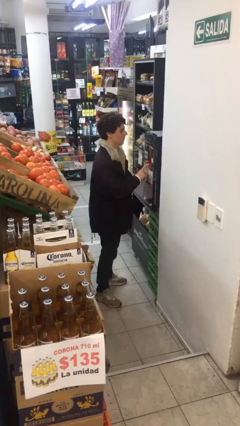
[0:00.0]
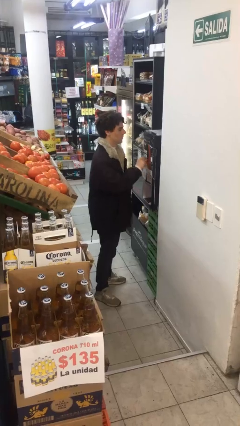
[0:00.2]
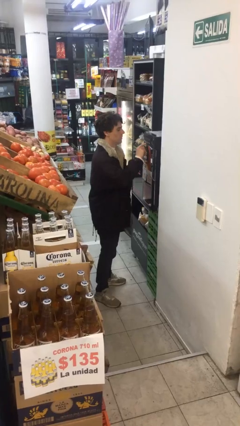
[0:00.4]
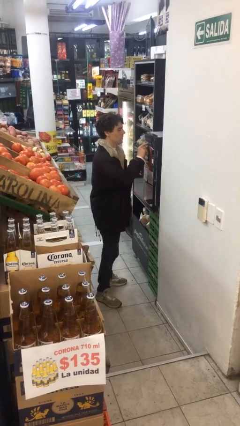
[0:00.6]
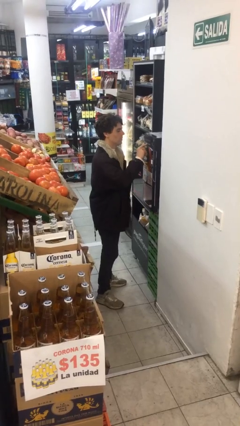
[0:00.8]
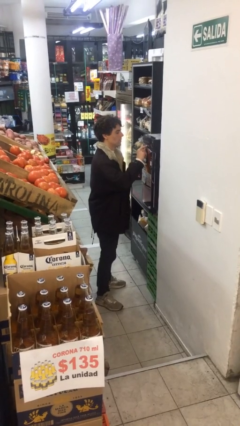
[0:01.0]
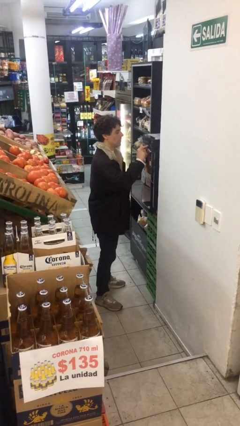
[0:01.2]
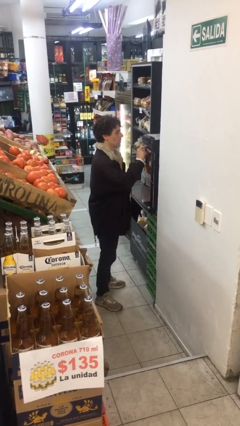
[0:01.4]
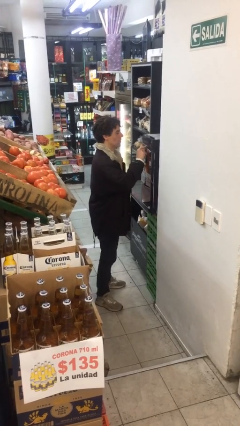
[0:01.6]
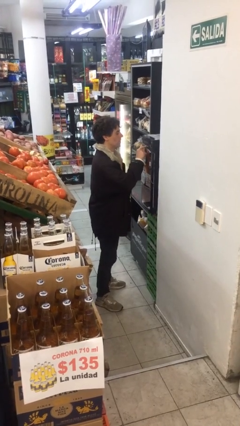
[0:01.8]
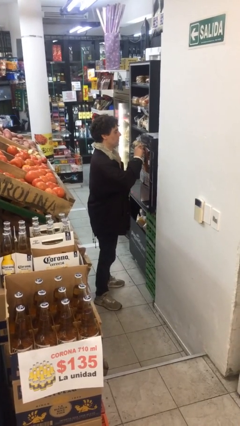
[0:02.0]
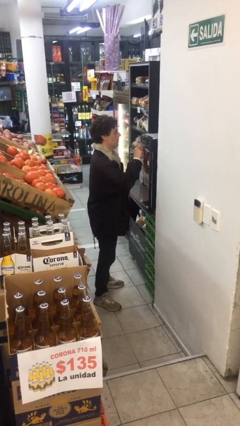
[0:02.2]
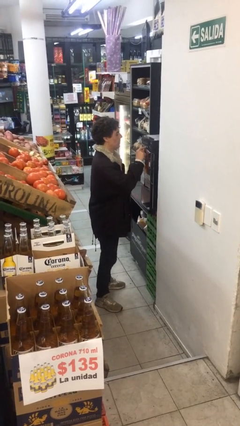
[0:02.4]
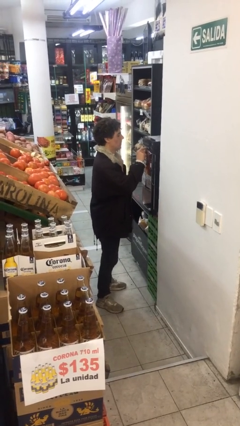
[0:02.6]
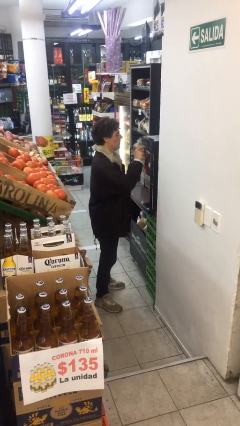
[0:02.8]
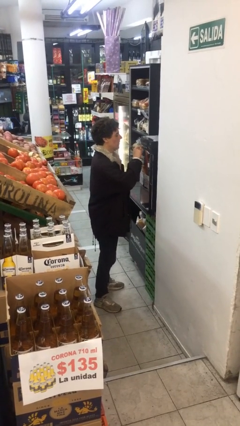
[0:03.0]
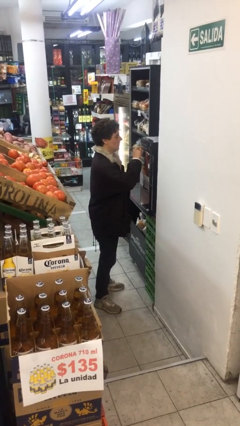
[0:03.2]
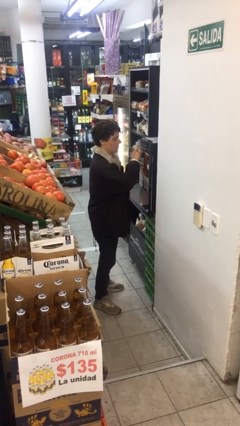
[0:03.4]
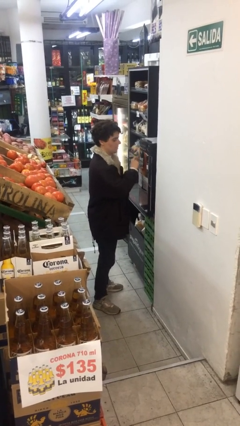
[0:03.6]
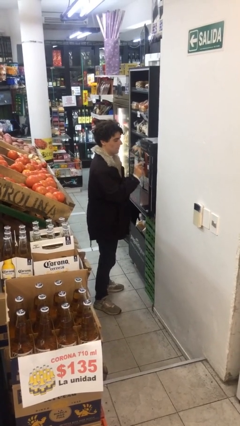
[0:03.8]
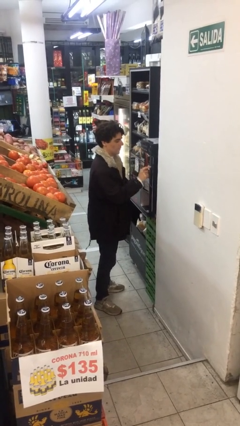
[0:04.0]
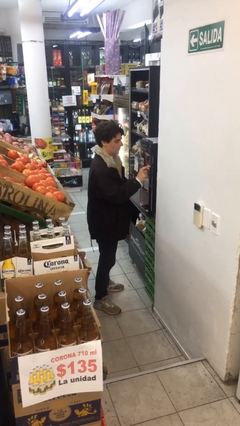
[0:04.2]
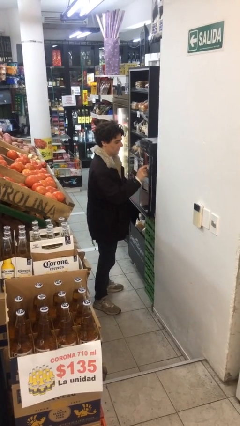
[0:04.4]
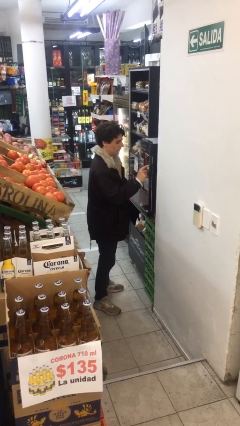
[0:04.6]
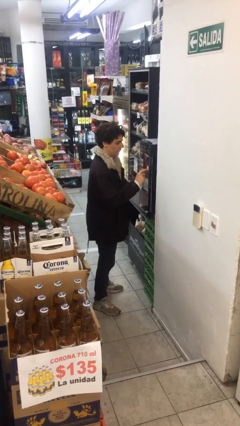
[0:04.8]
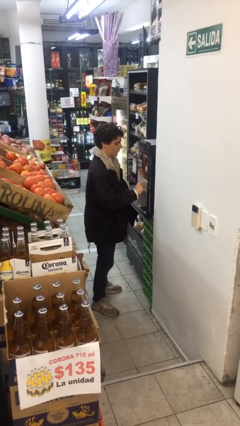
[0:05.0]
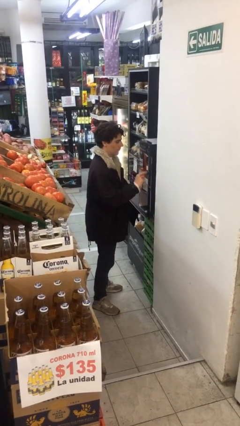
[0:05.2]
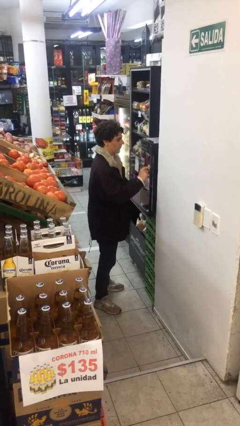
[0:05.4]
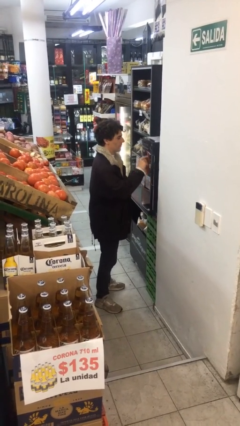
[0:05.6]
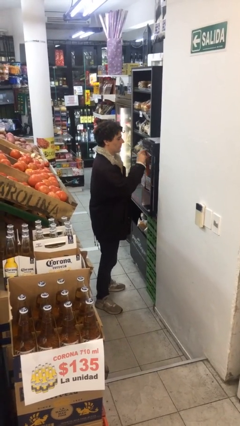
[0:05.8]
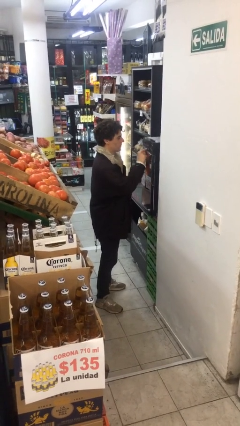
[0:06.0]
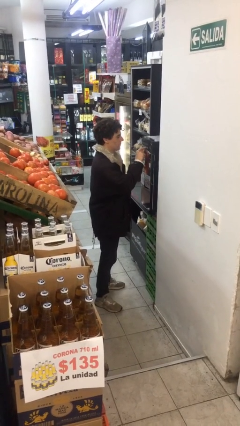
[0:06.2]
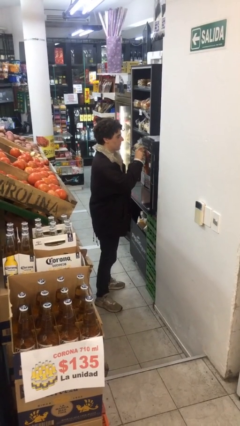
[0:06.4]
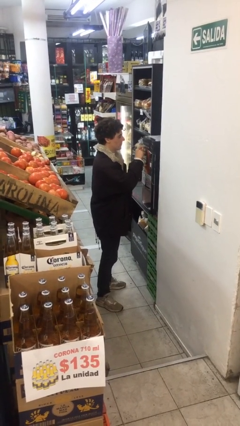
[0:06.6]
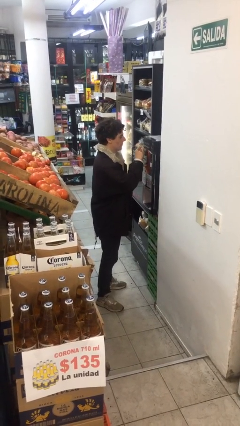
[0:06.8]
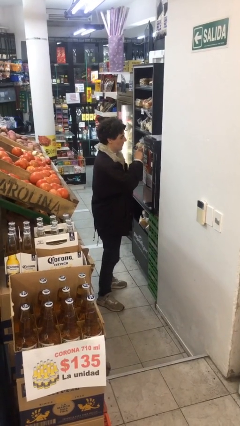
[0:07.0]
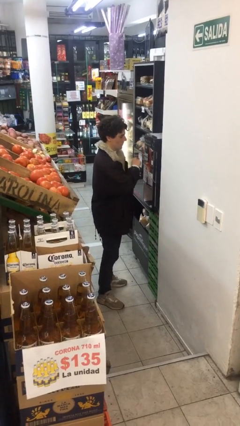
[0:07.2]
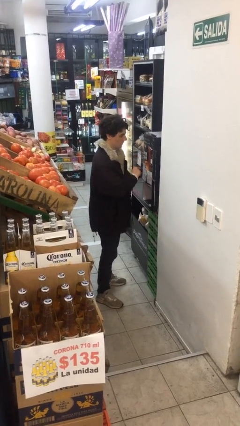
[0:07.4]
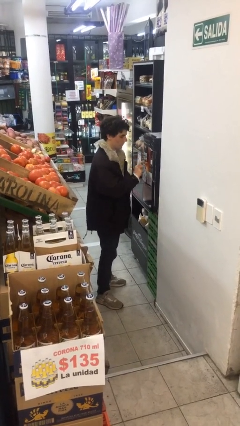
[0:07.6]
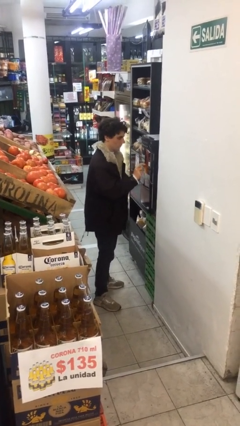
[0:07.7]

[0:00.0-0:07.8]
person purchases from machine

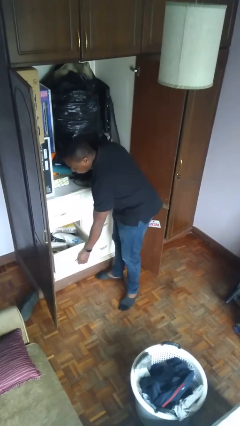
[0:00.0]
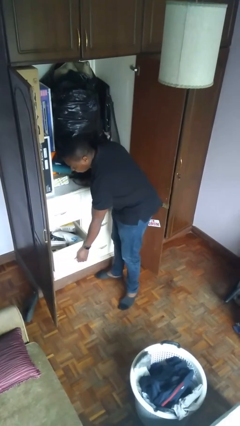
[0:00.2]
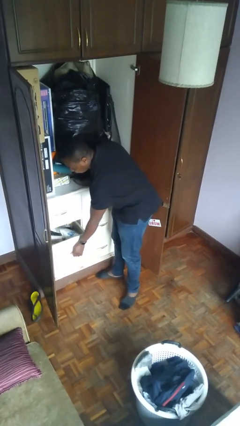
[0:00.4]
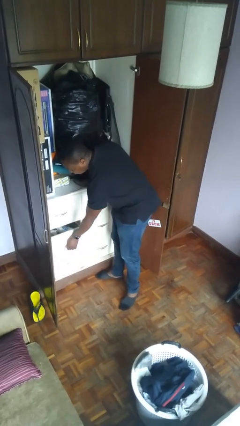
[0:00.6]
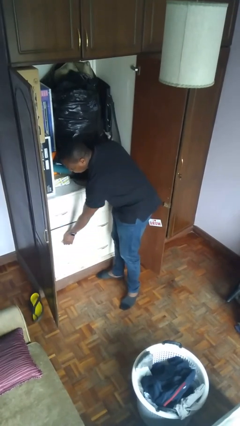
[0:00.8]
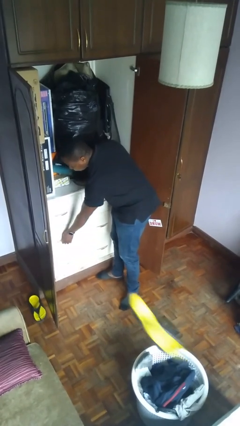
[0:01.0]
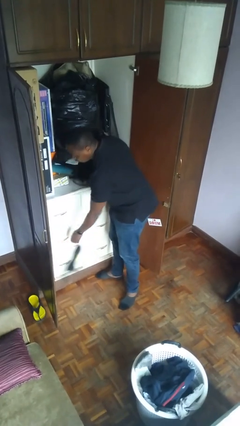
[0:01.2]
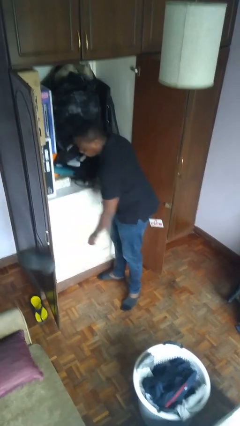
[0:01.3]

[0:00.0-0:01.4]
person closes dresser drawer

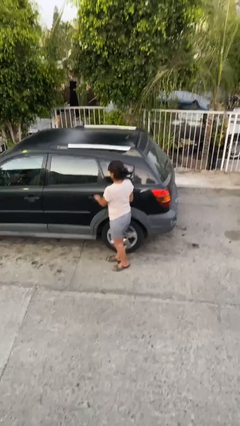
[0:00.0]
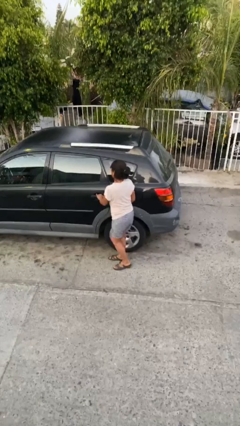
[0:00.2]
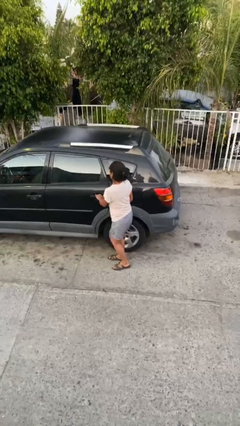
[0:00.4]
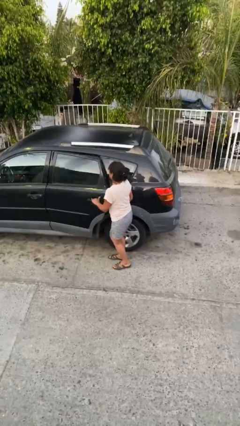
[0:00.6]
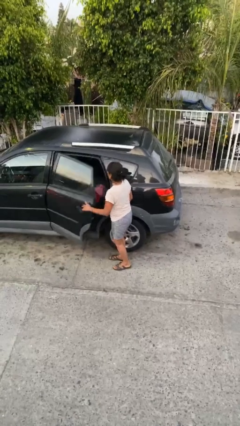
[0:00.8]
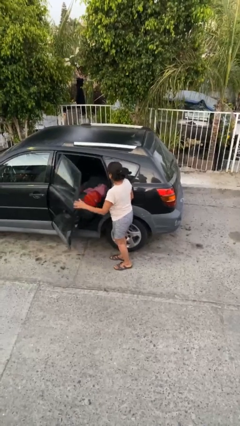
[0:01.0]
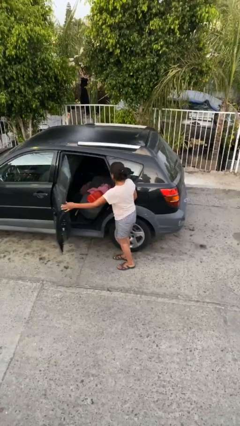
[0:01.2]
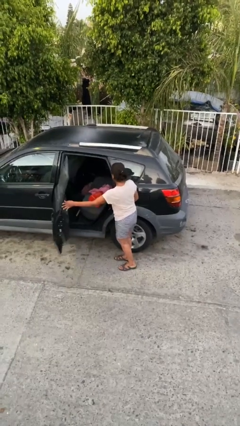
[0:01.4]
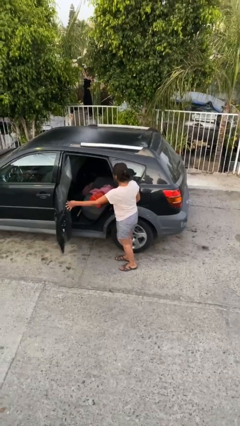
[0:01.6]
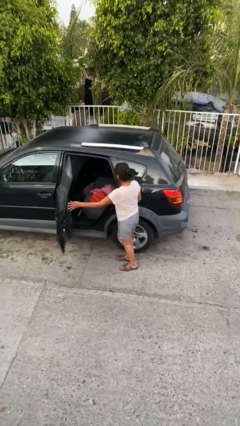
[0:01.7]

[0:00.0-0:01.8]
person opens car door

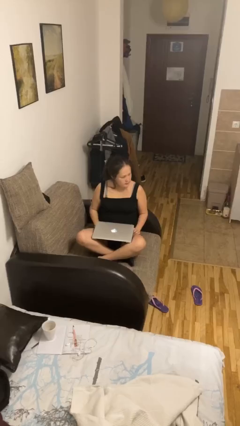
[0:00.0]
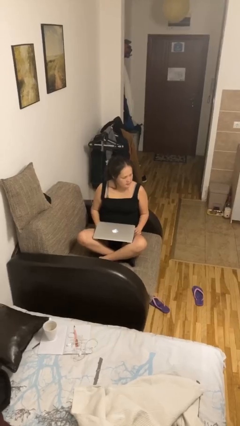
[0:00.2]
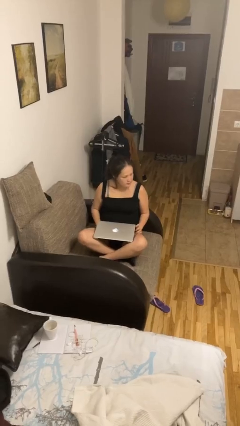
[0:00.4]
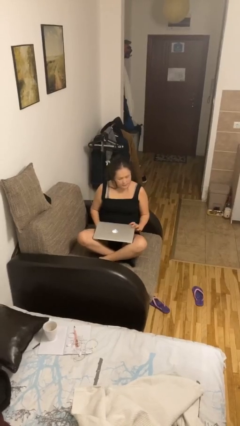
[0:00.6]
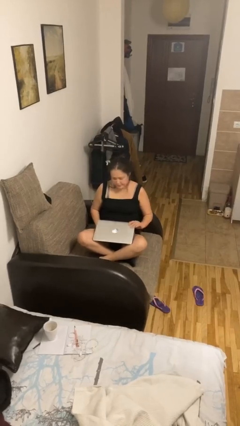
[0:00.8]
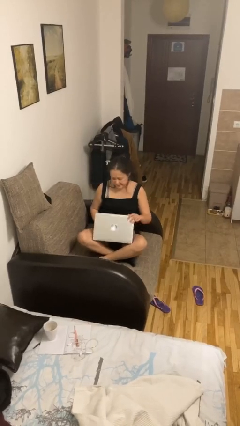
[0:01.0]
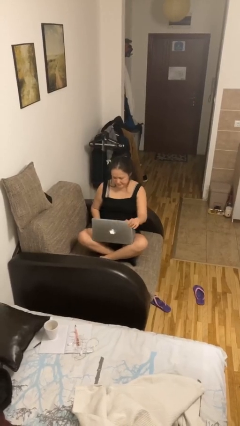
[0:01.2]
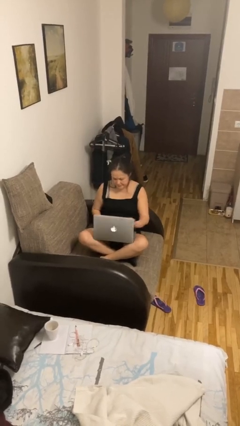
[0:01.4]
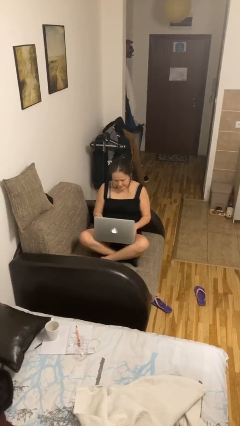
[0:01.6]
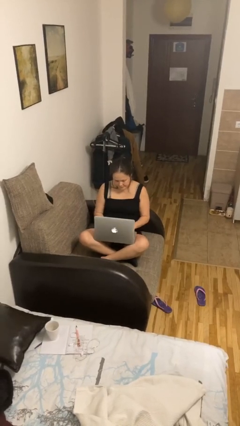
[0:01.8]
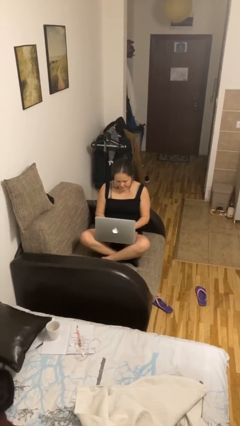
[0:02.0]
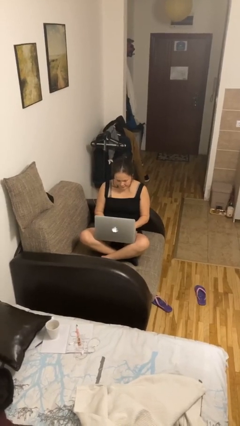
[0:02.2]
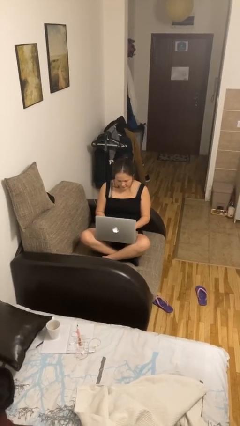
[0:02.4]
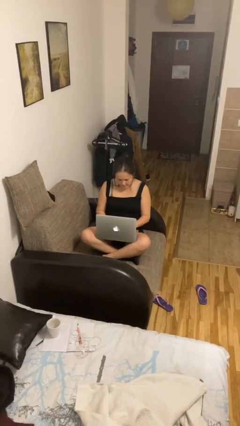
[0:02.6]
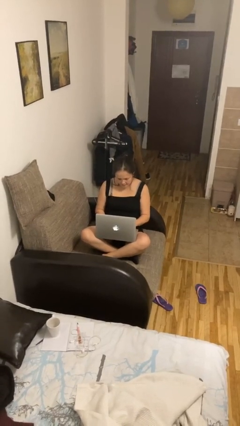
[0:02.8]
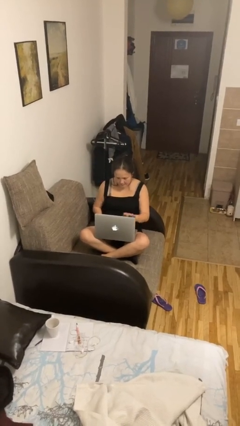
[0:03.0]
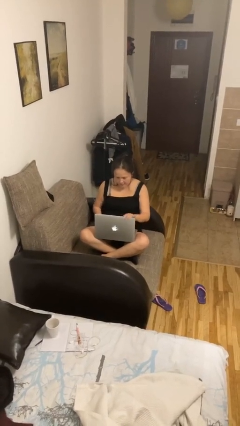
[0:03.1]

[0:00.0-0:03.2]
person interacts with laptop

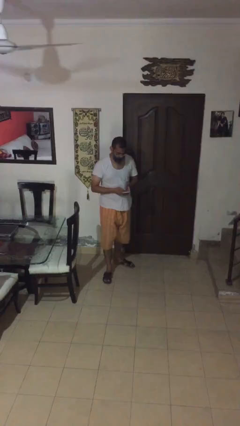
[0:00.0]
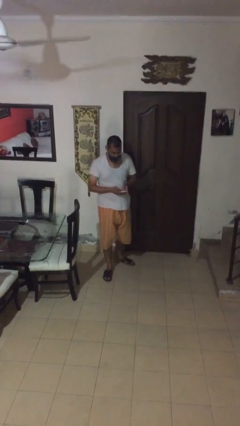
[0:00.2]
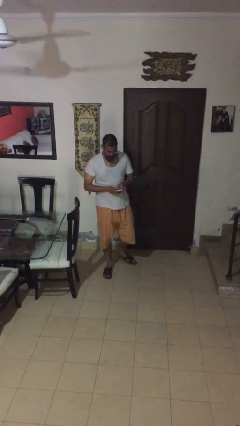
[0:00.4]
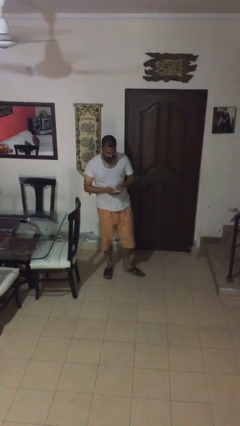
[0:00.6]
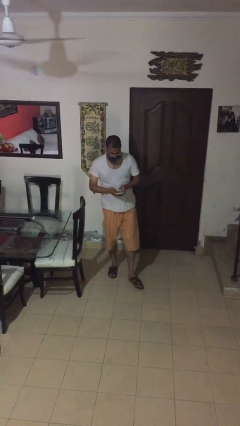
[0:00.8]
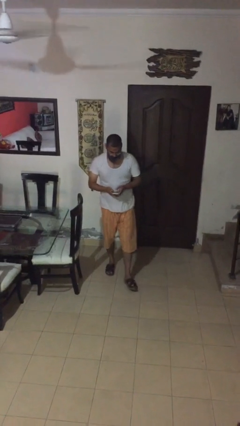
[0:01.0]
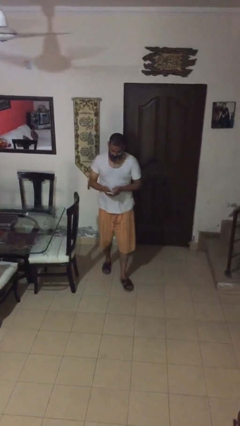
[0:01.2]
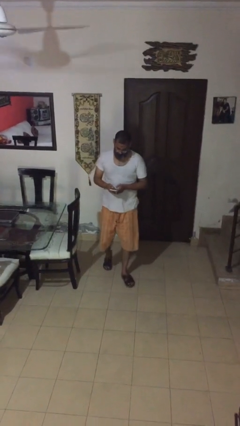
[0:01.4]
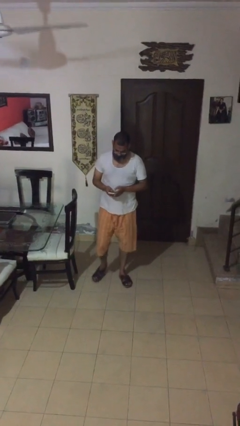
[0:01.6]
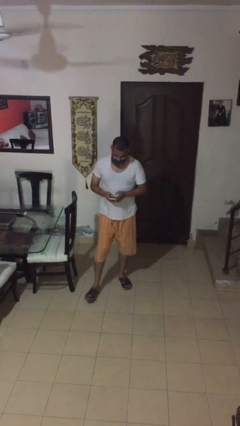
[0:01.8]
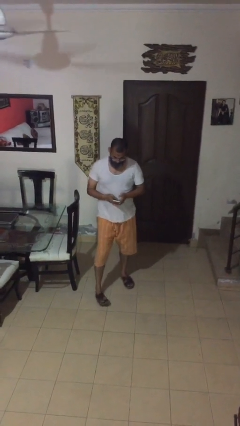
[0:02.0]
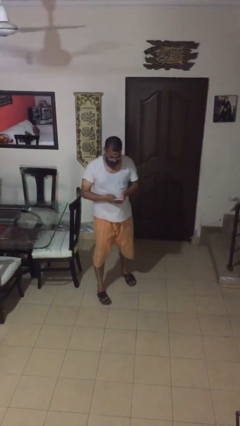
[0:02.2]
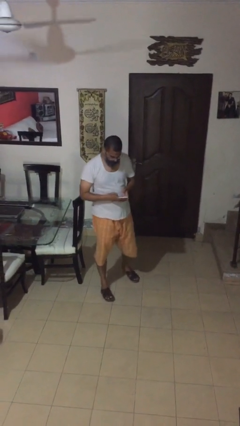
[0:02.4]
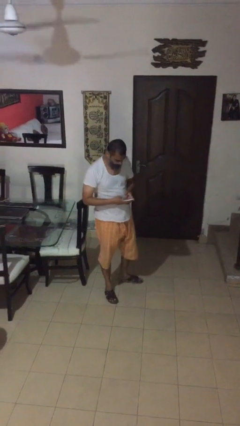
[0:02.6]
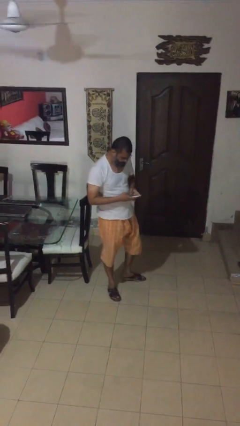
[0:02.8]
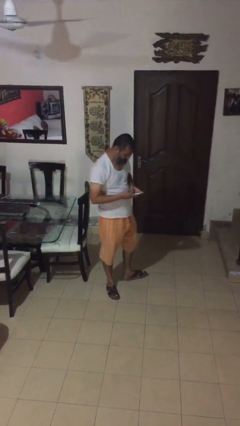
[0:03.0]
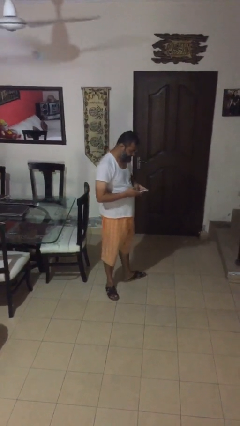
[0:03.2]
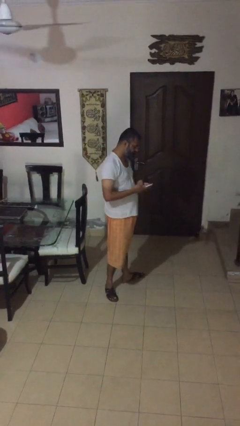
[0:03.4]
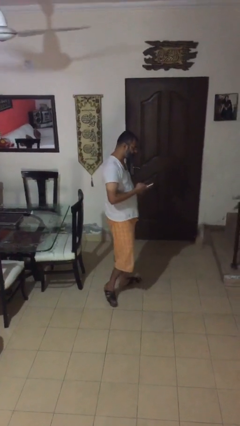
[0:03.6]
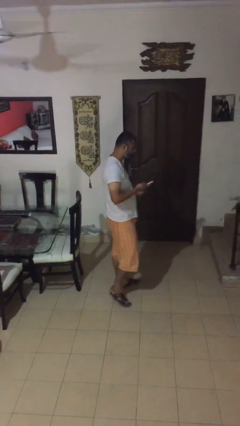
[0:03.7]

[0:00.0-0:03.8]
person texts on phone
